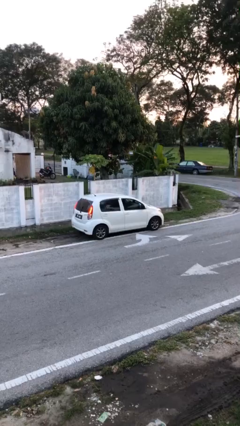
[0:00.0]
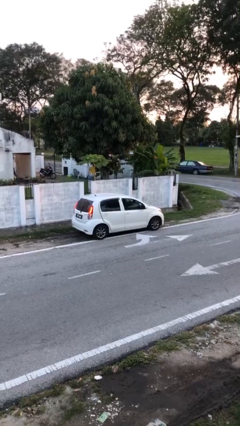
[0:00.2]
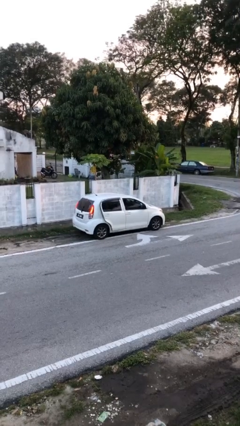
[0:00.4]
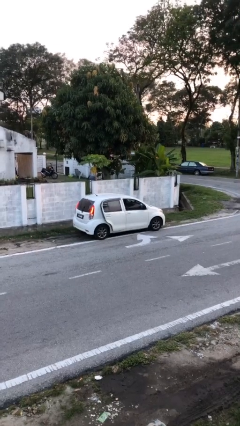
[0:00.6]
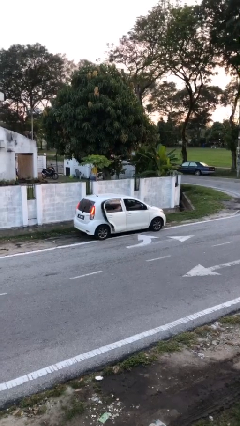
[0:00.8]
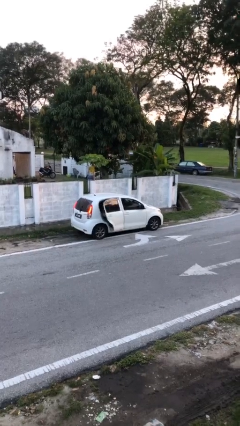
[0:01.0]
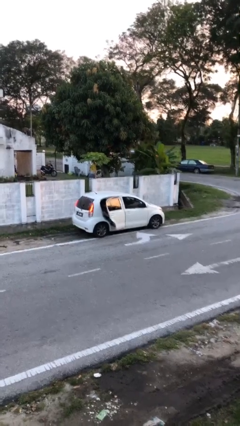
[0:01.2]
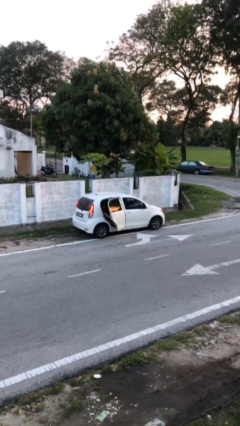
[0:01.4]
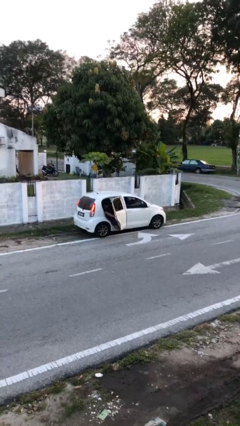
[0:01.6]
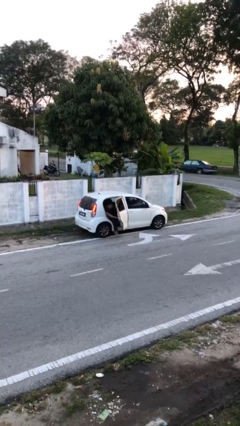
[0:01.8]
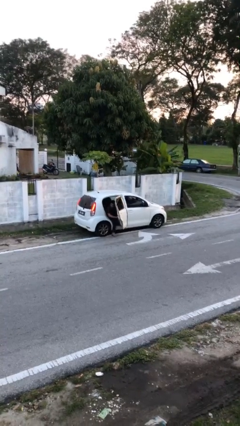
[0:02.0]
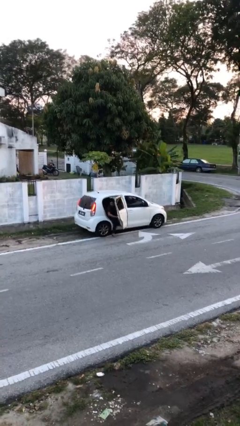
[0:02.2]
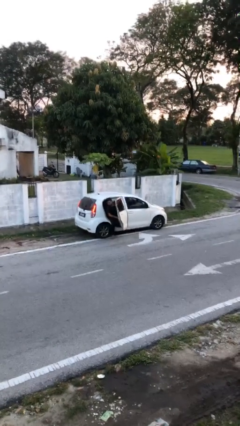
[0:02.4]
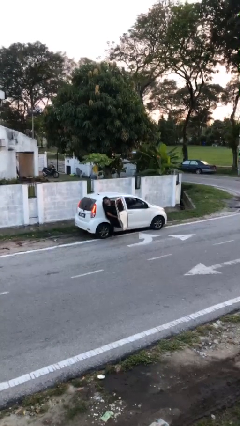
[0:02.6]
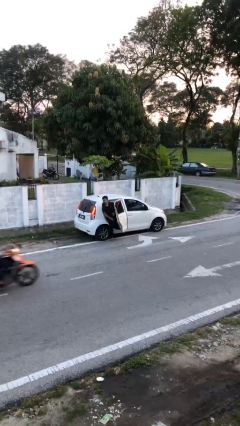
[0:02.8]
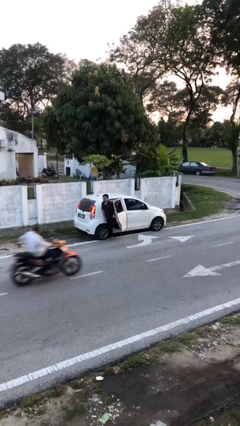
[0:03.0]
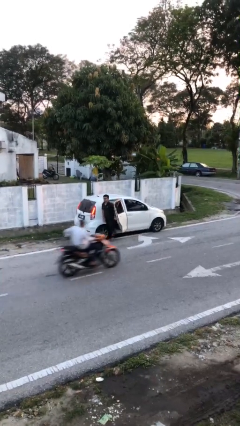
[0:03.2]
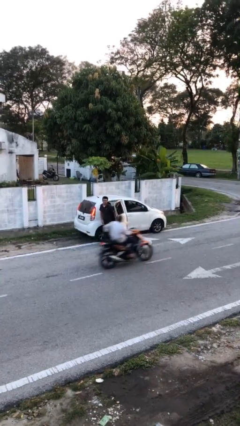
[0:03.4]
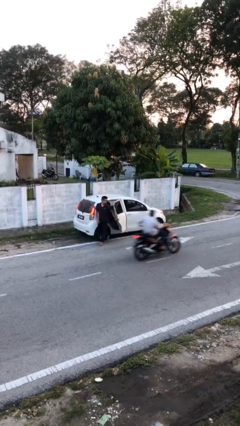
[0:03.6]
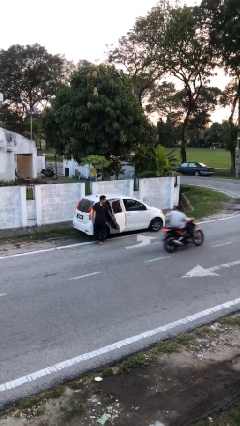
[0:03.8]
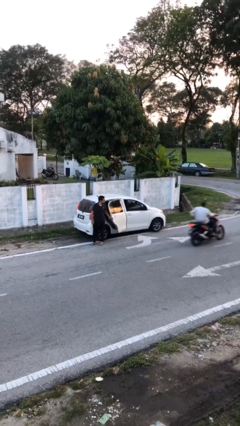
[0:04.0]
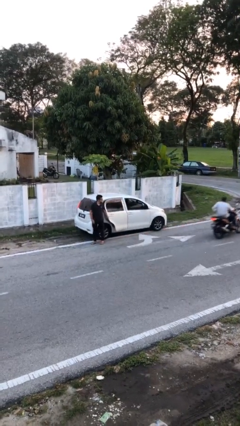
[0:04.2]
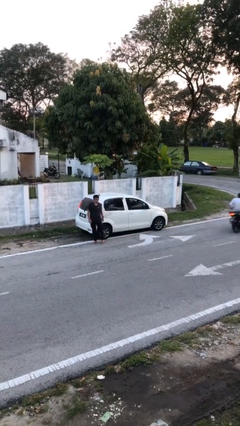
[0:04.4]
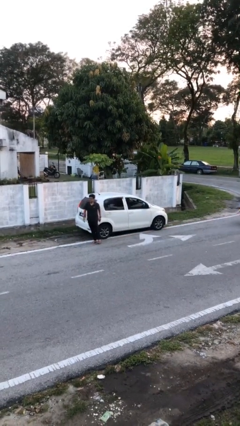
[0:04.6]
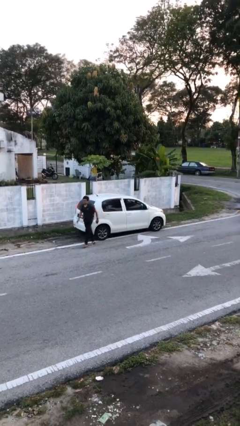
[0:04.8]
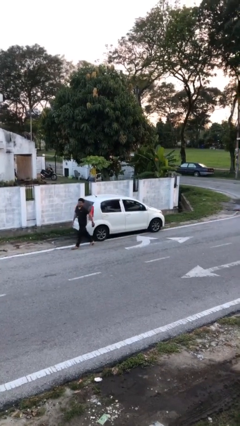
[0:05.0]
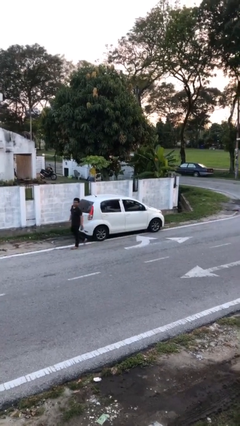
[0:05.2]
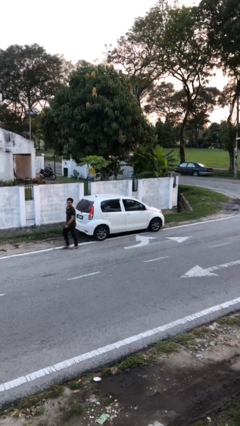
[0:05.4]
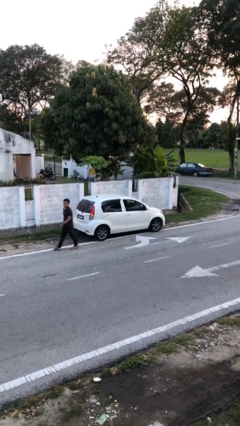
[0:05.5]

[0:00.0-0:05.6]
car drops off person

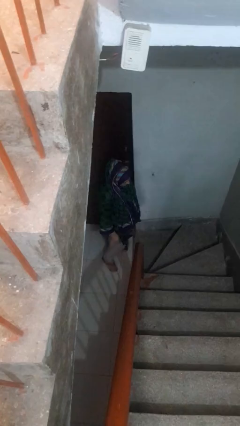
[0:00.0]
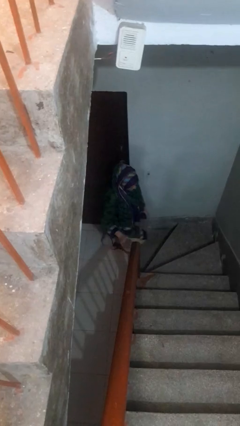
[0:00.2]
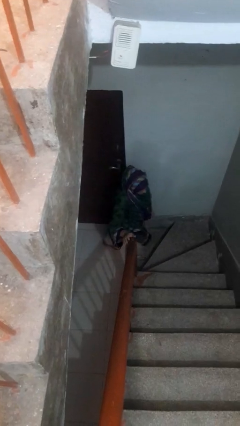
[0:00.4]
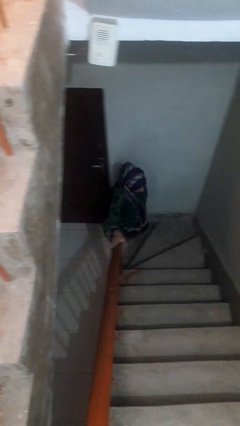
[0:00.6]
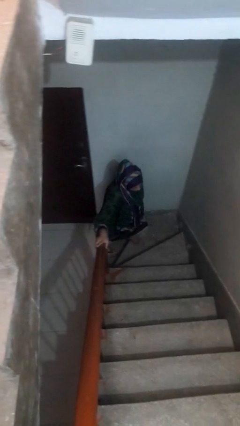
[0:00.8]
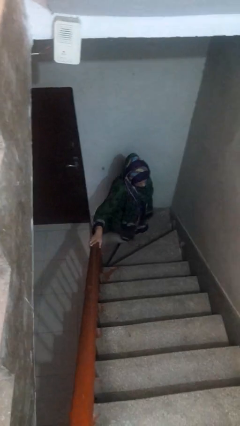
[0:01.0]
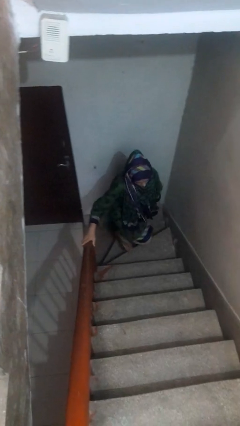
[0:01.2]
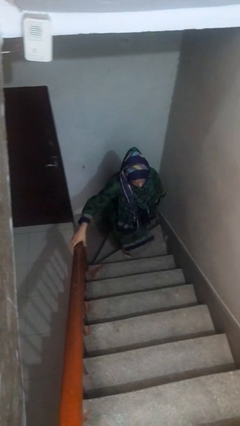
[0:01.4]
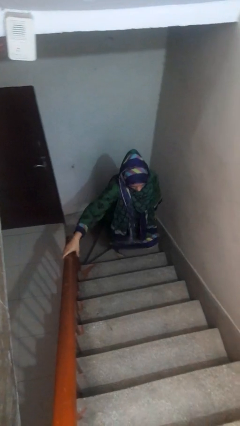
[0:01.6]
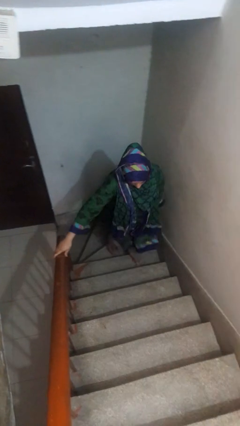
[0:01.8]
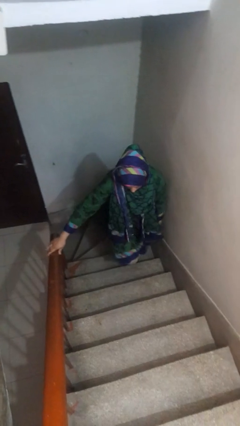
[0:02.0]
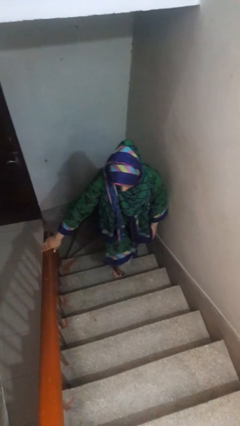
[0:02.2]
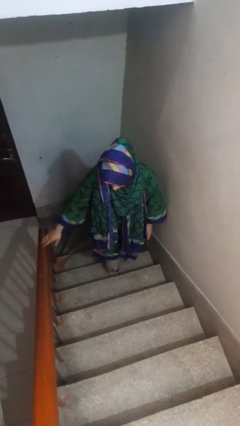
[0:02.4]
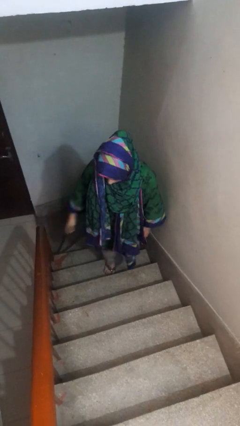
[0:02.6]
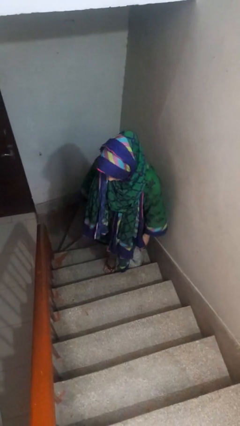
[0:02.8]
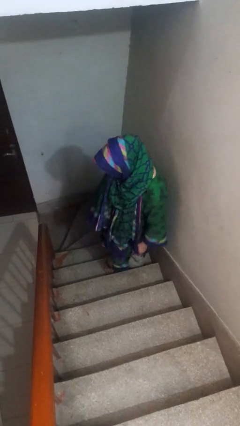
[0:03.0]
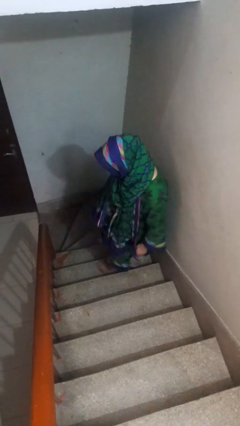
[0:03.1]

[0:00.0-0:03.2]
person climbs up stairs

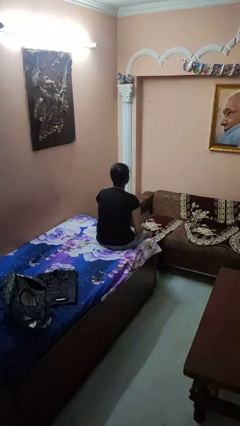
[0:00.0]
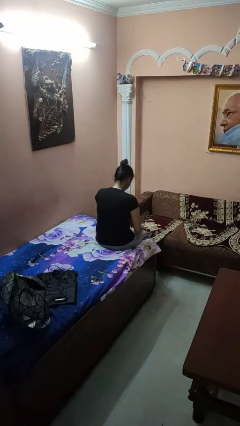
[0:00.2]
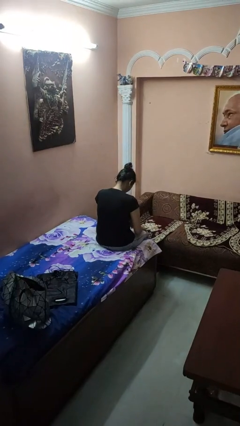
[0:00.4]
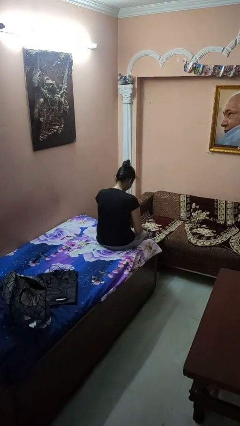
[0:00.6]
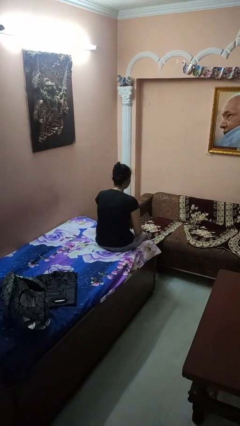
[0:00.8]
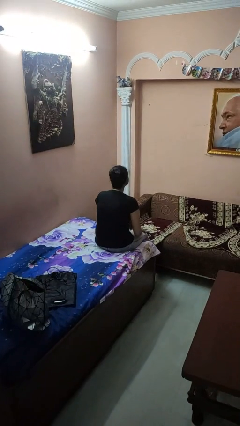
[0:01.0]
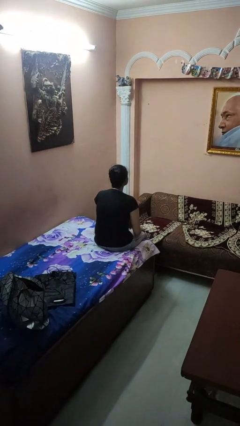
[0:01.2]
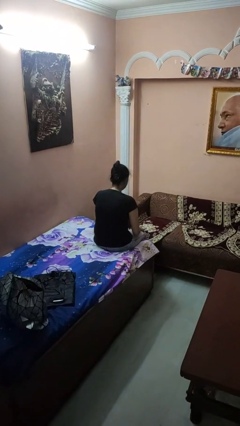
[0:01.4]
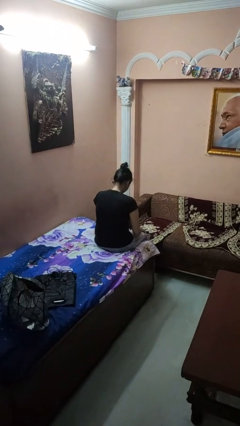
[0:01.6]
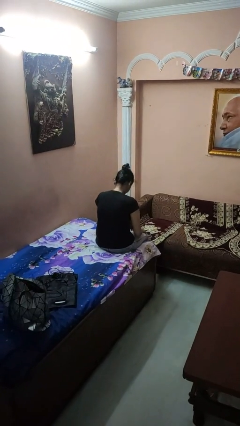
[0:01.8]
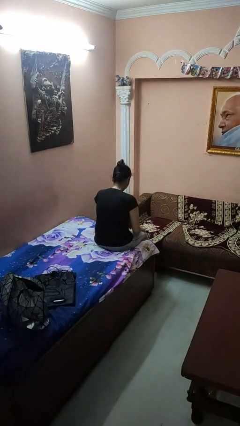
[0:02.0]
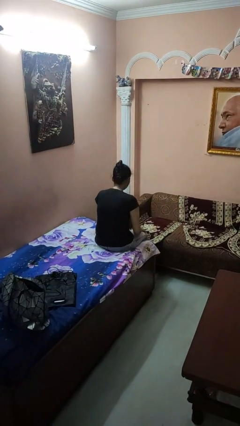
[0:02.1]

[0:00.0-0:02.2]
person nods head

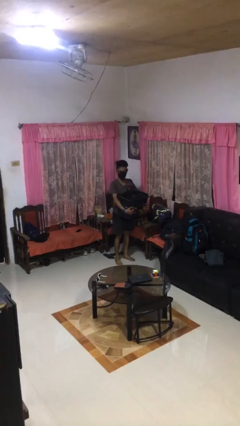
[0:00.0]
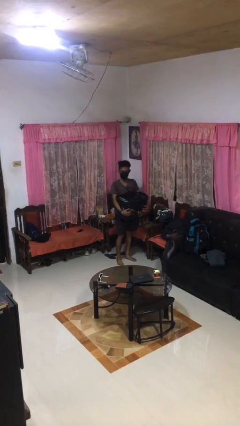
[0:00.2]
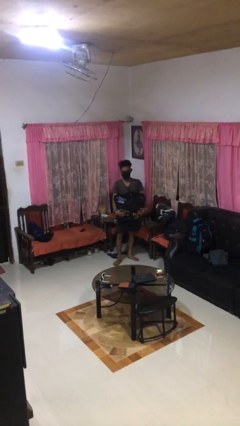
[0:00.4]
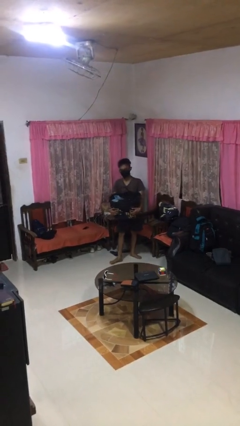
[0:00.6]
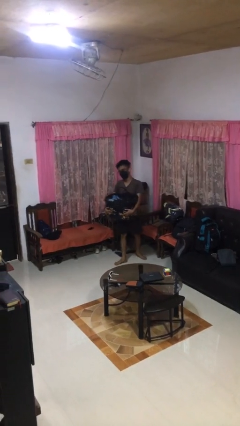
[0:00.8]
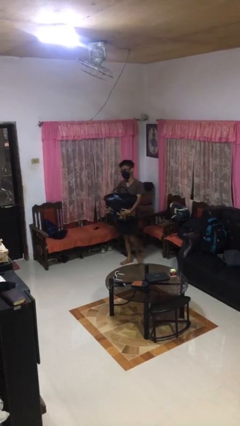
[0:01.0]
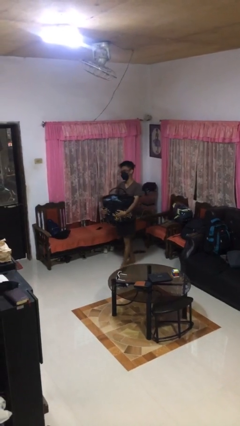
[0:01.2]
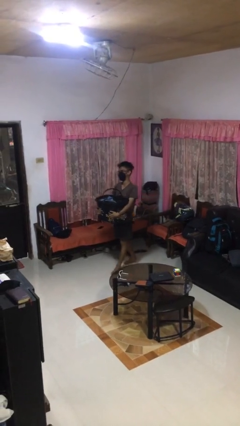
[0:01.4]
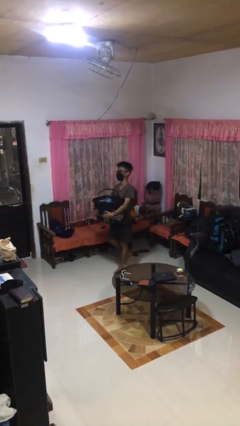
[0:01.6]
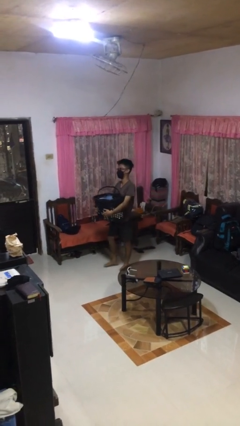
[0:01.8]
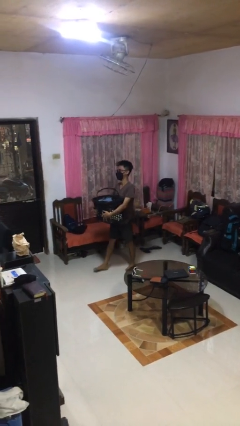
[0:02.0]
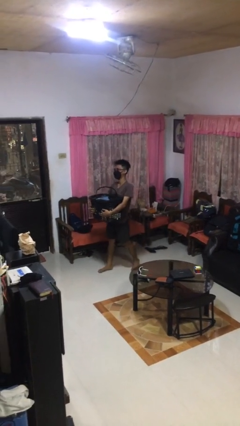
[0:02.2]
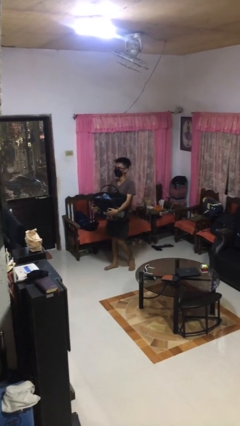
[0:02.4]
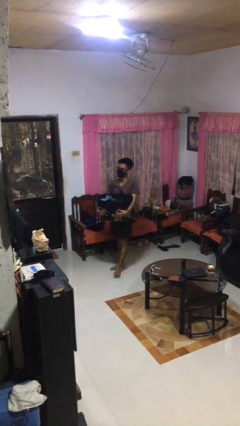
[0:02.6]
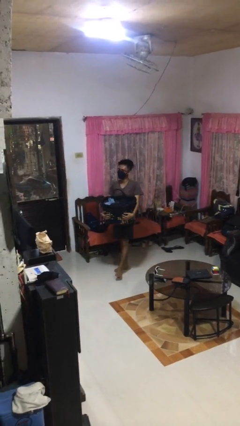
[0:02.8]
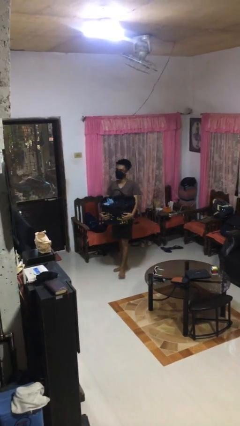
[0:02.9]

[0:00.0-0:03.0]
person carries laundry basket

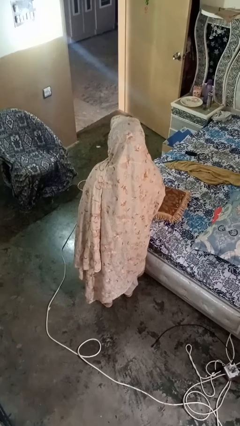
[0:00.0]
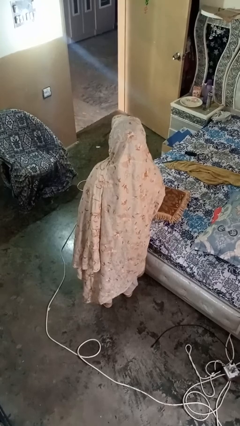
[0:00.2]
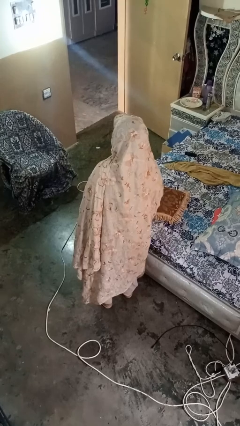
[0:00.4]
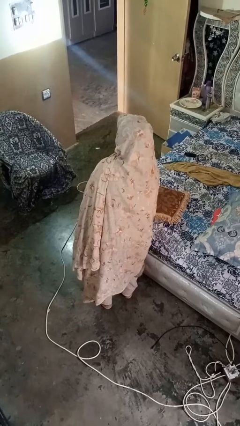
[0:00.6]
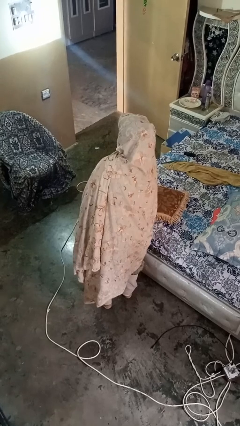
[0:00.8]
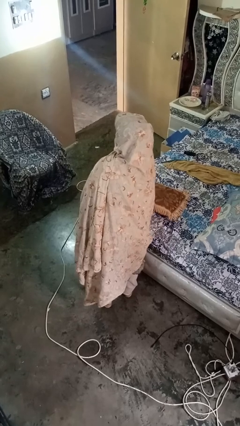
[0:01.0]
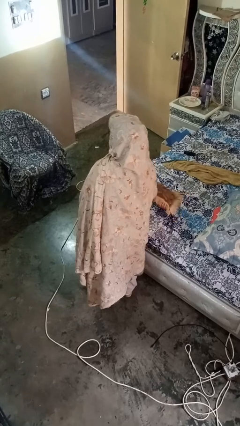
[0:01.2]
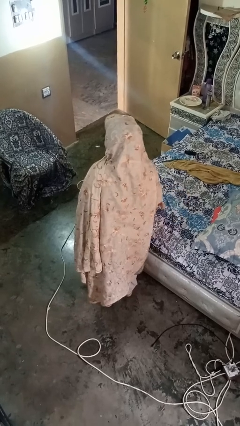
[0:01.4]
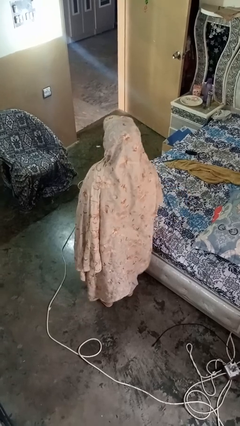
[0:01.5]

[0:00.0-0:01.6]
person picks up object from bed

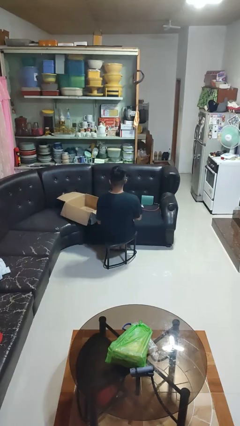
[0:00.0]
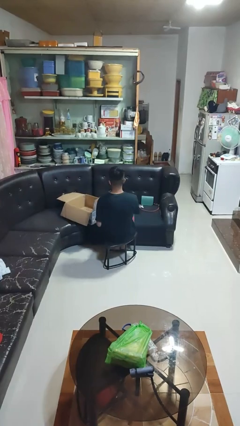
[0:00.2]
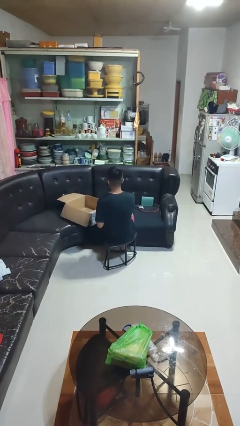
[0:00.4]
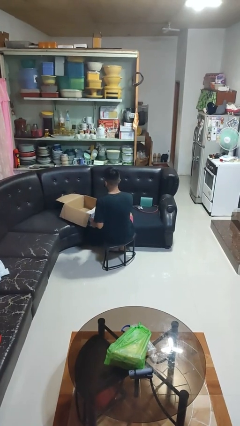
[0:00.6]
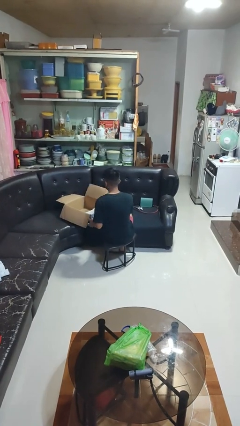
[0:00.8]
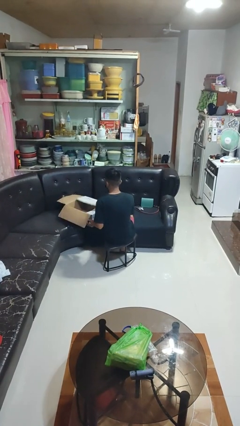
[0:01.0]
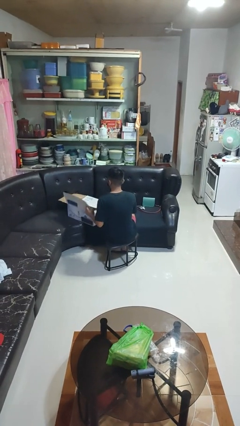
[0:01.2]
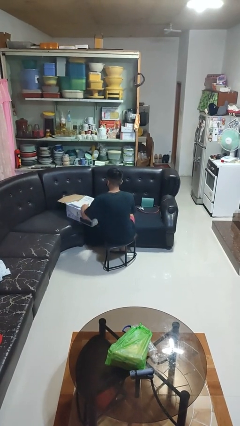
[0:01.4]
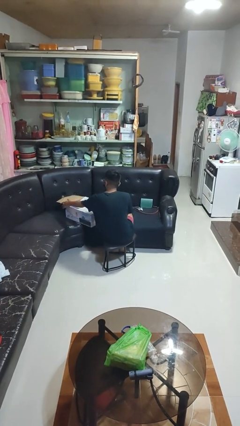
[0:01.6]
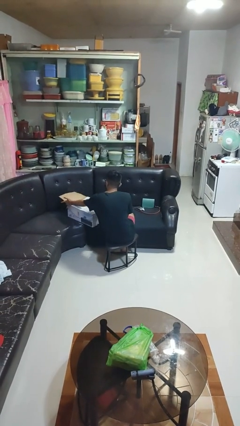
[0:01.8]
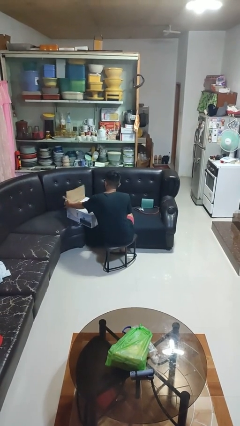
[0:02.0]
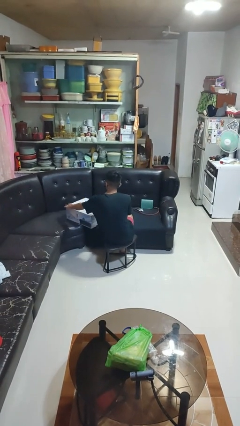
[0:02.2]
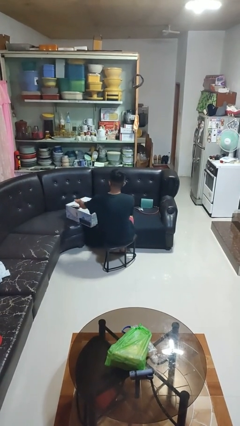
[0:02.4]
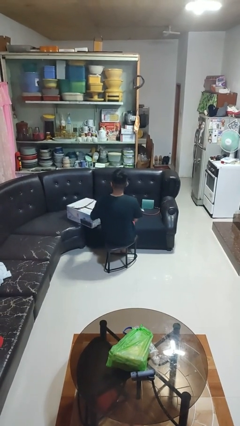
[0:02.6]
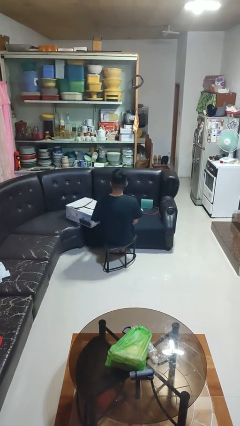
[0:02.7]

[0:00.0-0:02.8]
person closes box
